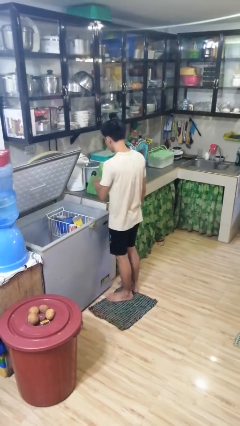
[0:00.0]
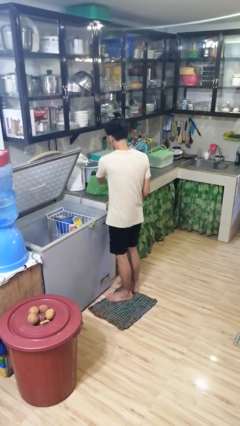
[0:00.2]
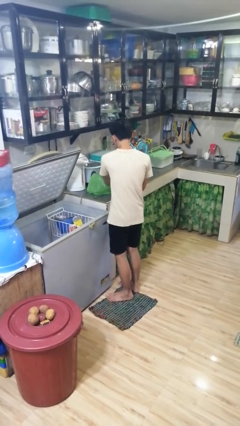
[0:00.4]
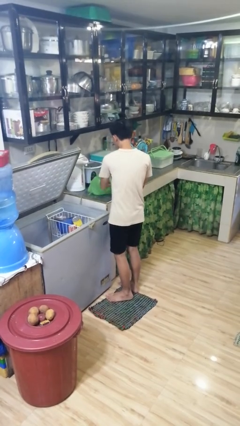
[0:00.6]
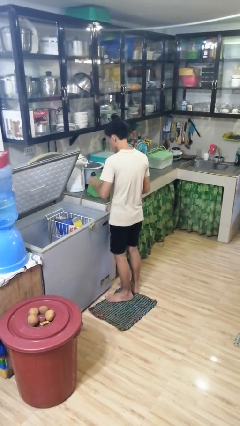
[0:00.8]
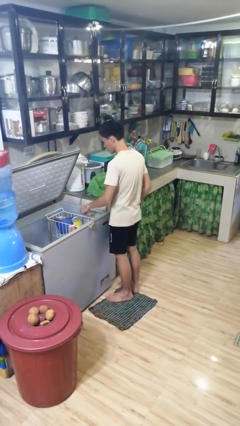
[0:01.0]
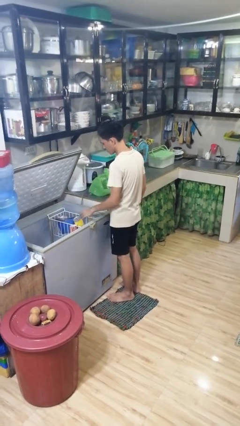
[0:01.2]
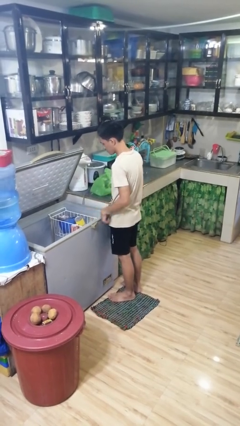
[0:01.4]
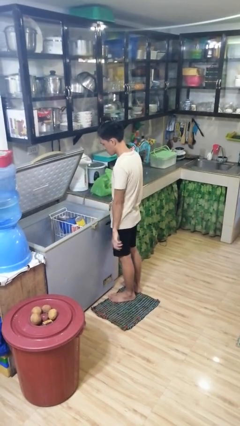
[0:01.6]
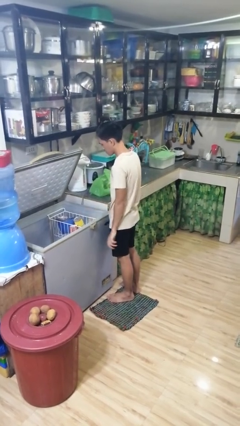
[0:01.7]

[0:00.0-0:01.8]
person loads groceries into refrigerator

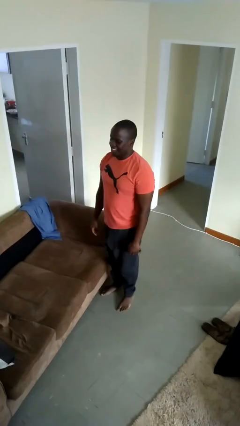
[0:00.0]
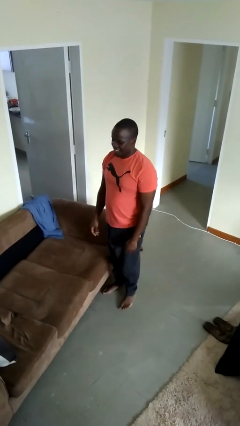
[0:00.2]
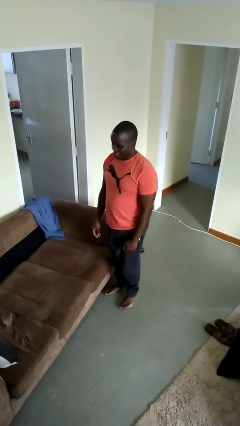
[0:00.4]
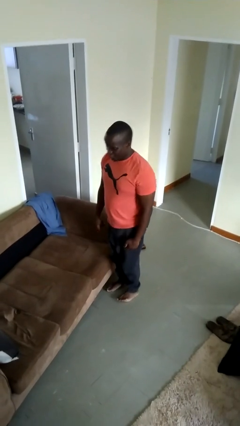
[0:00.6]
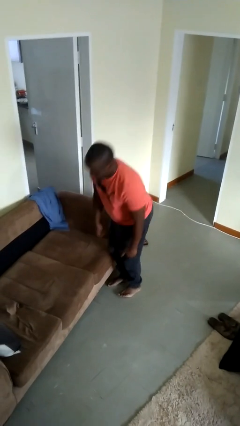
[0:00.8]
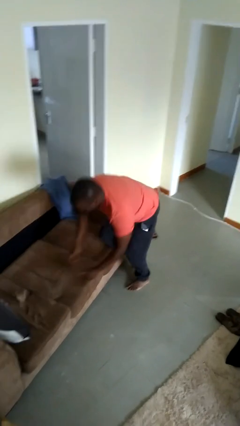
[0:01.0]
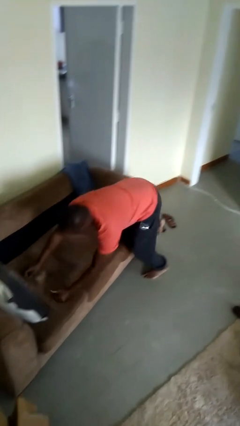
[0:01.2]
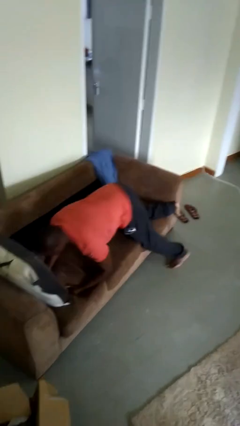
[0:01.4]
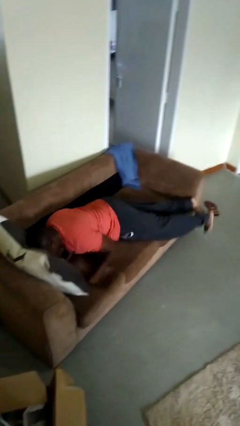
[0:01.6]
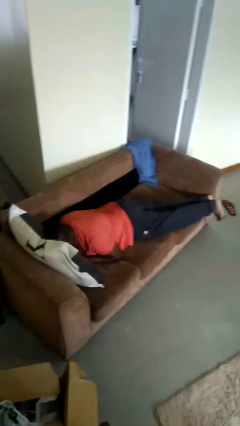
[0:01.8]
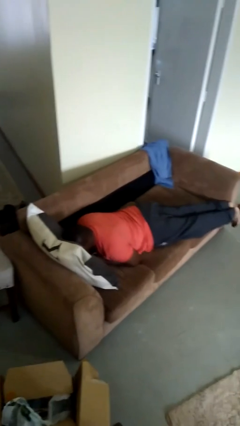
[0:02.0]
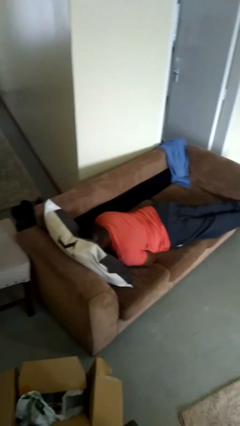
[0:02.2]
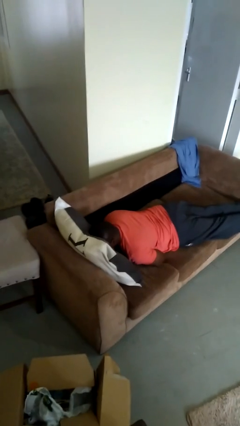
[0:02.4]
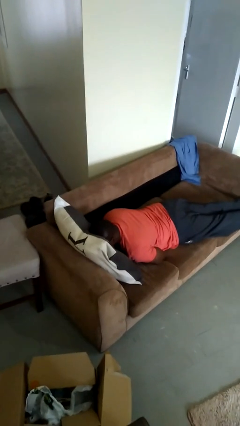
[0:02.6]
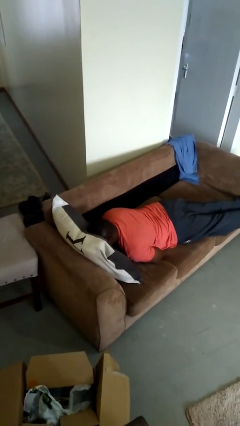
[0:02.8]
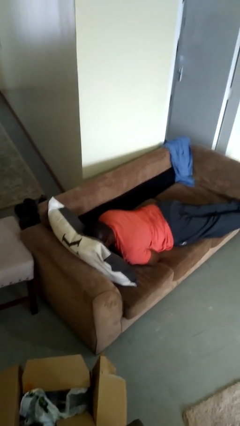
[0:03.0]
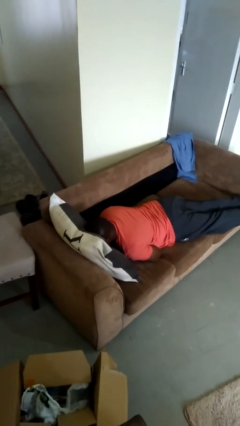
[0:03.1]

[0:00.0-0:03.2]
person lies down on couch

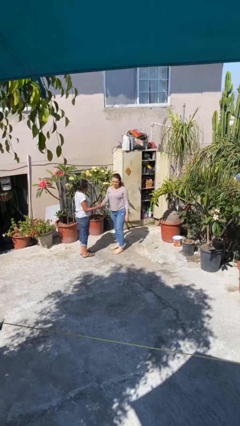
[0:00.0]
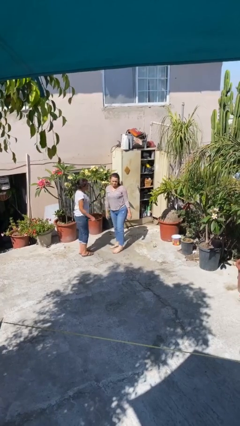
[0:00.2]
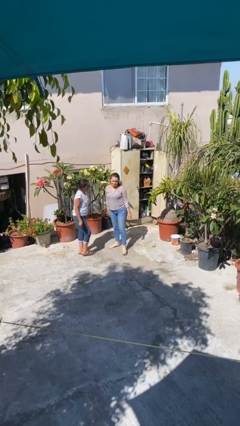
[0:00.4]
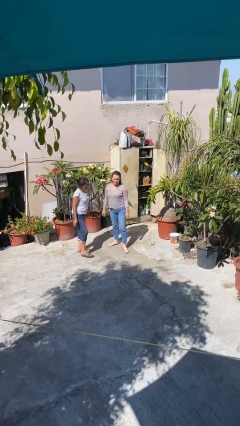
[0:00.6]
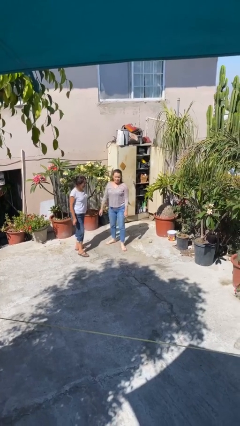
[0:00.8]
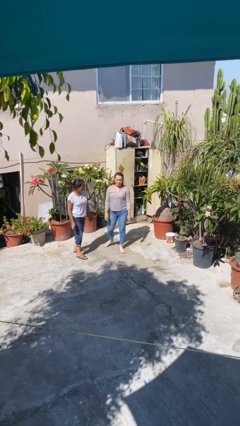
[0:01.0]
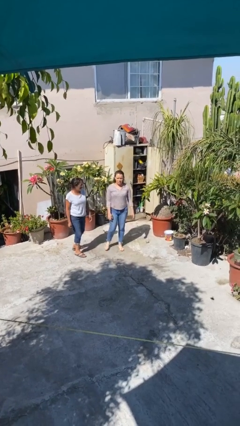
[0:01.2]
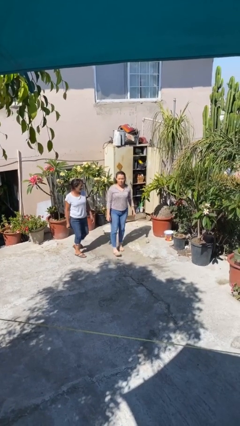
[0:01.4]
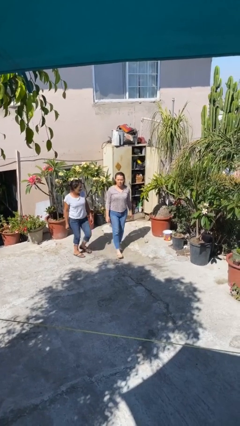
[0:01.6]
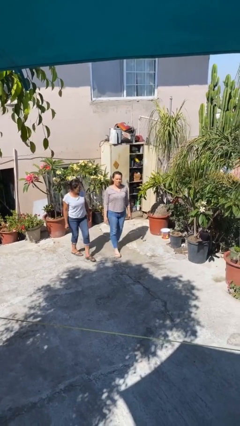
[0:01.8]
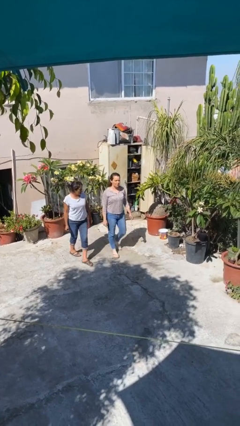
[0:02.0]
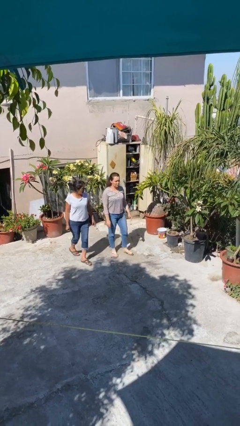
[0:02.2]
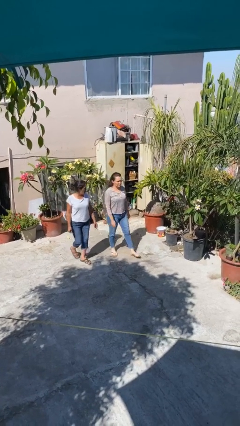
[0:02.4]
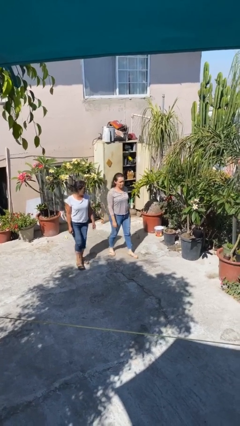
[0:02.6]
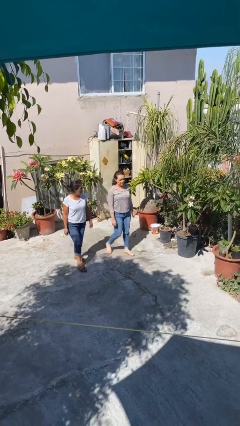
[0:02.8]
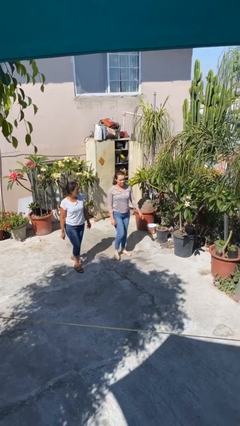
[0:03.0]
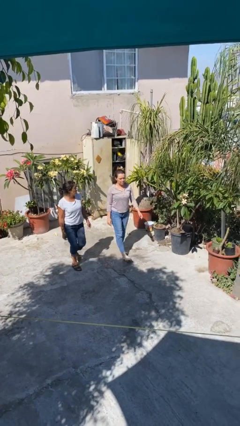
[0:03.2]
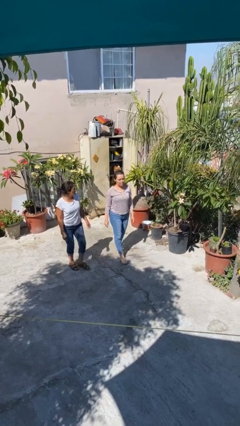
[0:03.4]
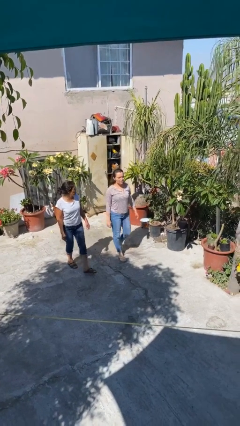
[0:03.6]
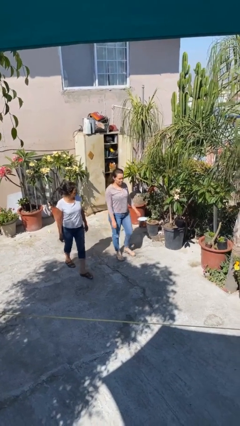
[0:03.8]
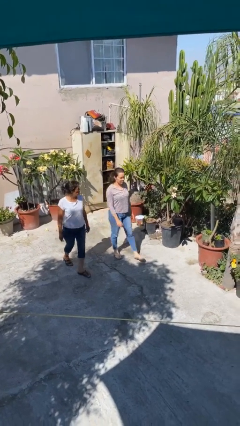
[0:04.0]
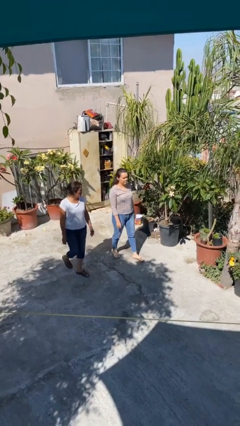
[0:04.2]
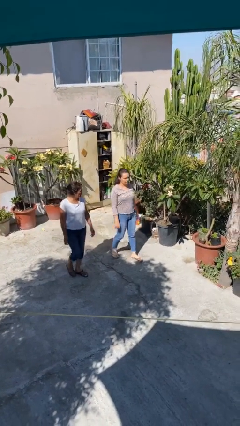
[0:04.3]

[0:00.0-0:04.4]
person talks to person

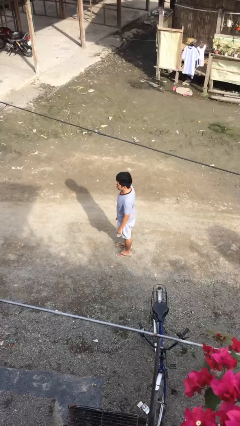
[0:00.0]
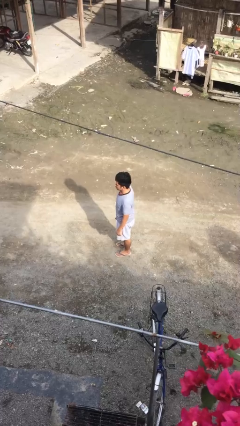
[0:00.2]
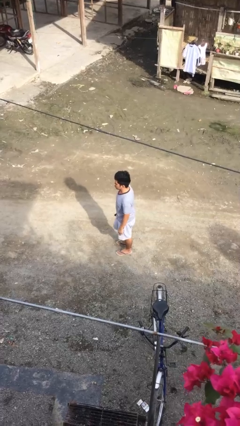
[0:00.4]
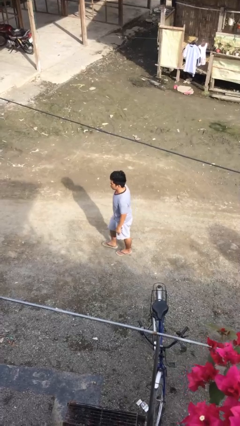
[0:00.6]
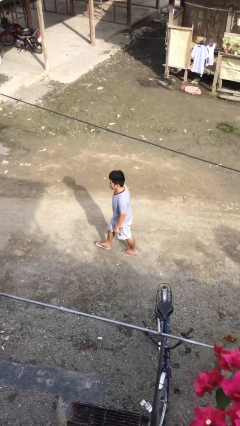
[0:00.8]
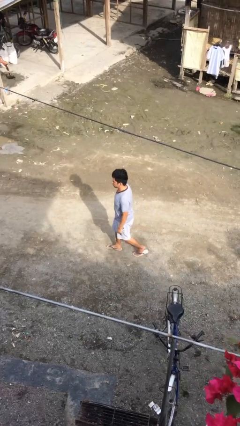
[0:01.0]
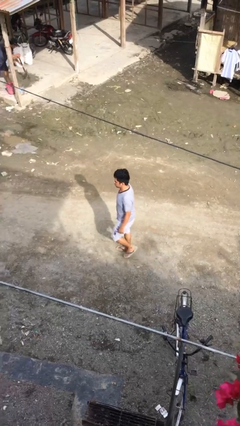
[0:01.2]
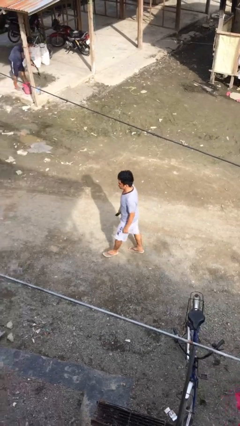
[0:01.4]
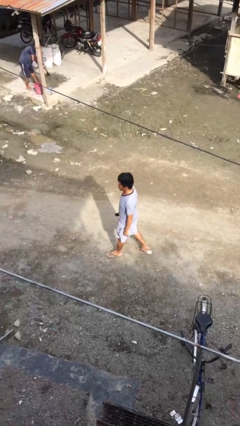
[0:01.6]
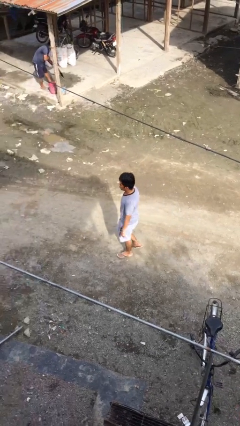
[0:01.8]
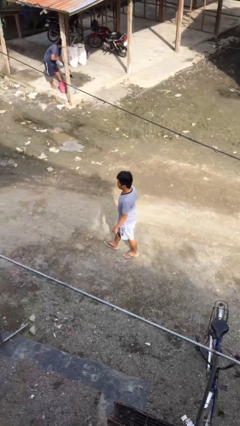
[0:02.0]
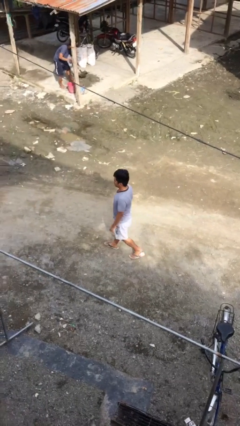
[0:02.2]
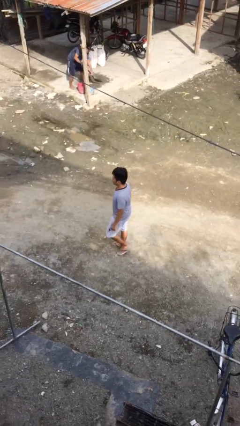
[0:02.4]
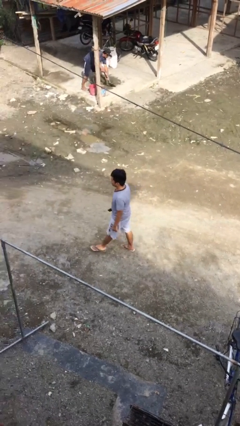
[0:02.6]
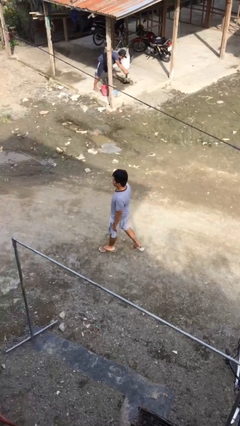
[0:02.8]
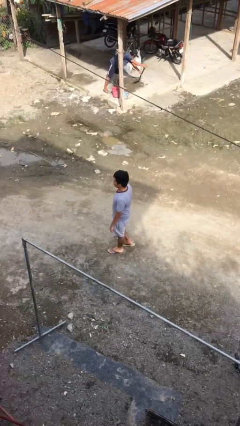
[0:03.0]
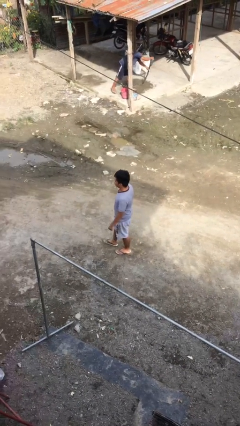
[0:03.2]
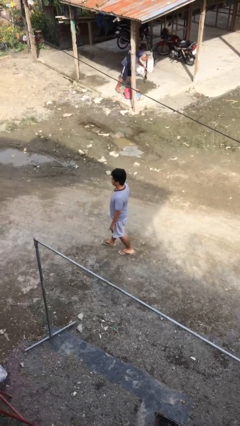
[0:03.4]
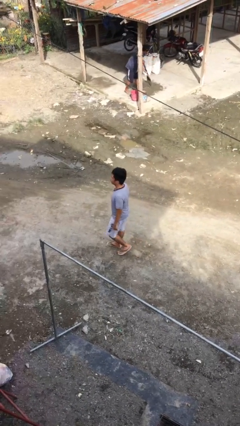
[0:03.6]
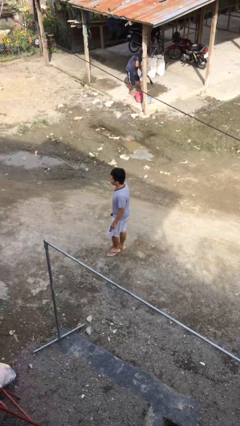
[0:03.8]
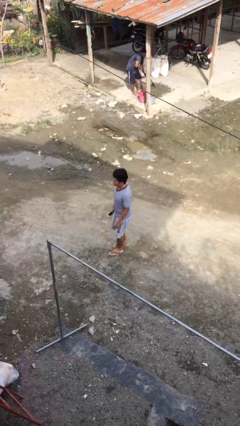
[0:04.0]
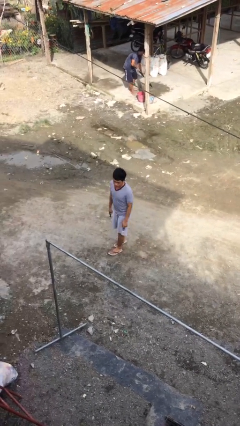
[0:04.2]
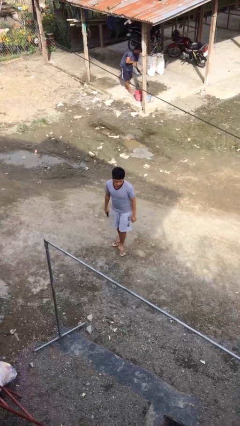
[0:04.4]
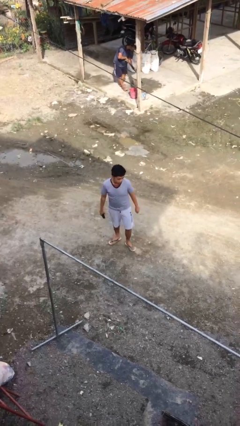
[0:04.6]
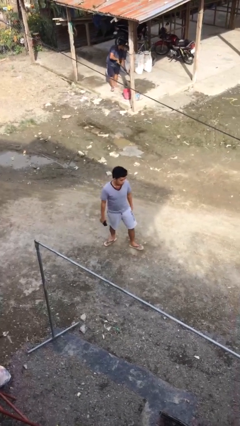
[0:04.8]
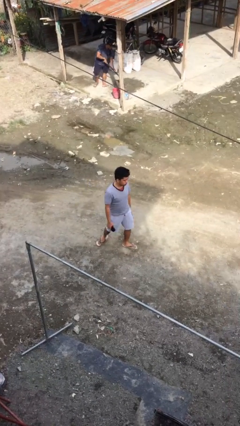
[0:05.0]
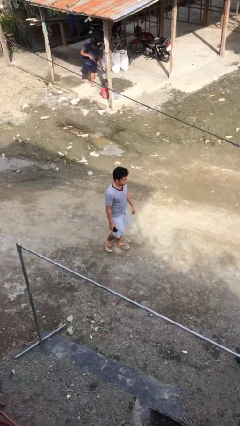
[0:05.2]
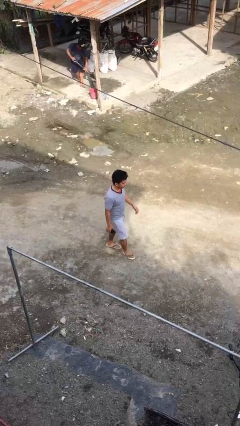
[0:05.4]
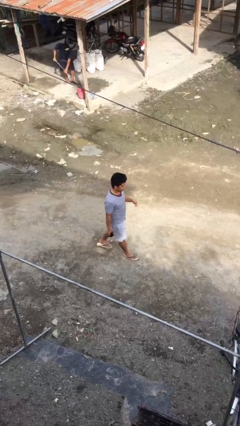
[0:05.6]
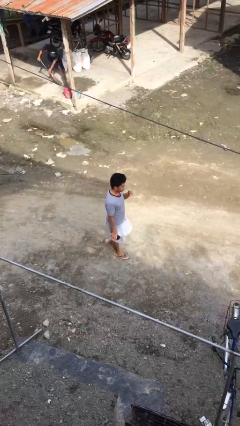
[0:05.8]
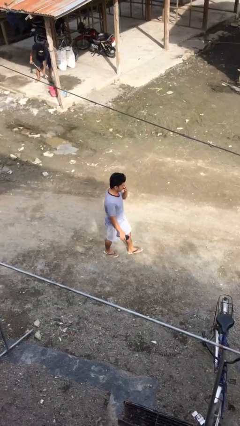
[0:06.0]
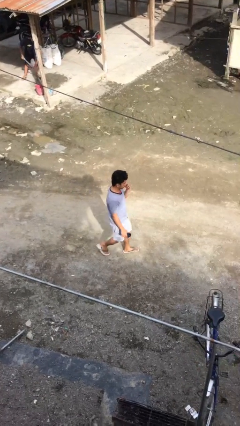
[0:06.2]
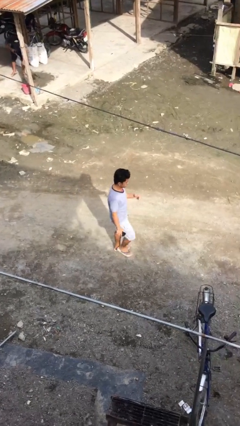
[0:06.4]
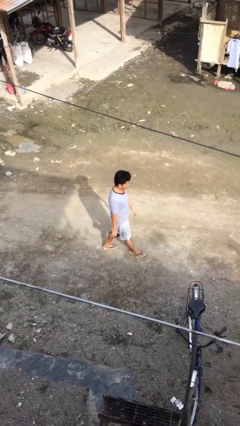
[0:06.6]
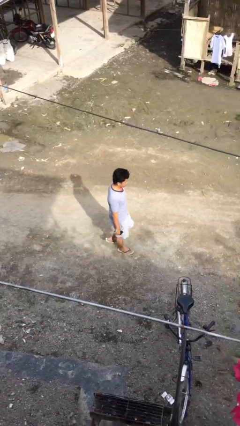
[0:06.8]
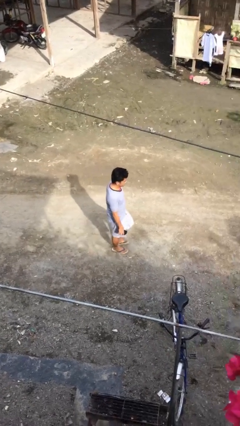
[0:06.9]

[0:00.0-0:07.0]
person walks

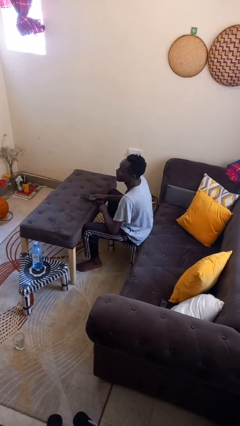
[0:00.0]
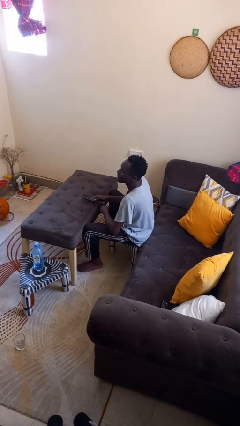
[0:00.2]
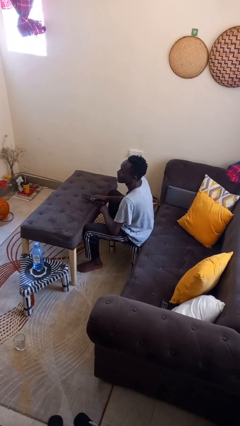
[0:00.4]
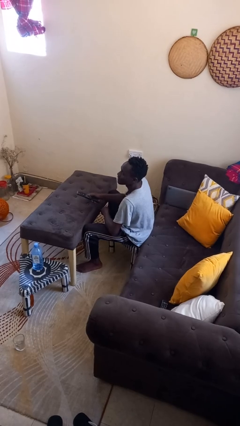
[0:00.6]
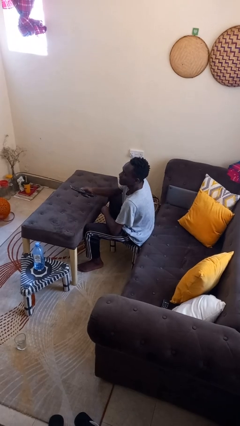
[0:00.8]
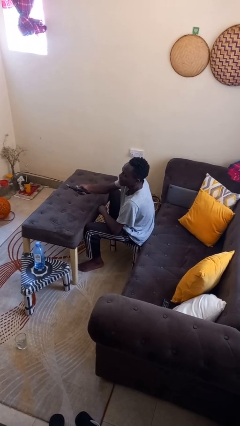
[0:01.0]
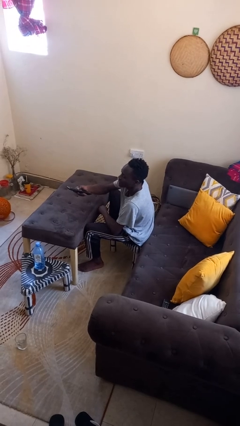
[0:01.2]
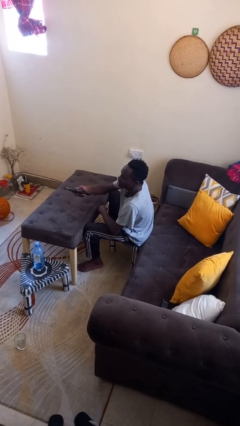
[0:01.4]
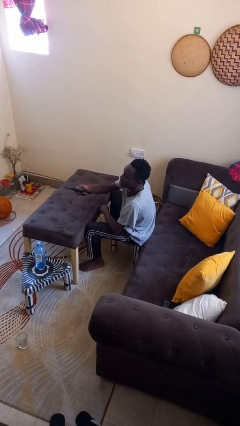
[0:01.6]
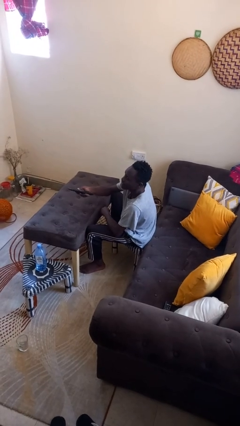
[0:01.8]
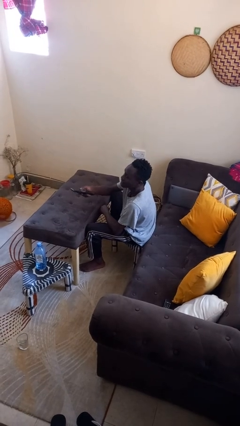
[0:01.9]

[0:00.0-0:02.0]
person uses television remote
